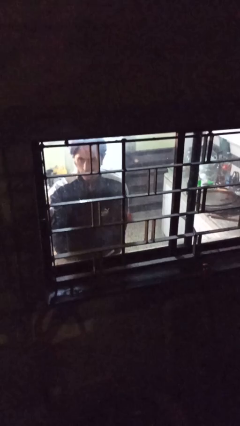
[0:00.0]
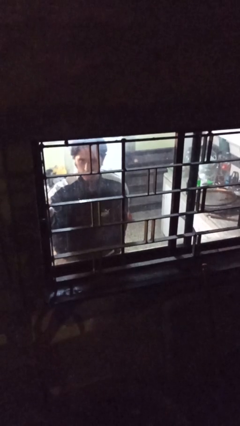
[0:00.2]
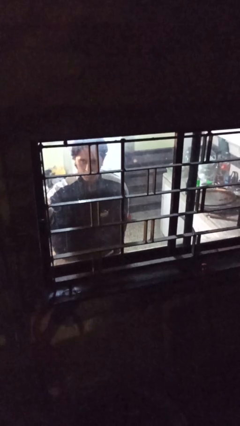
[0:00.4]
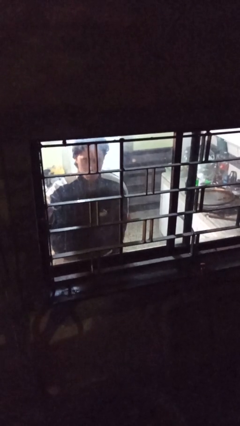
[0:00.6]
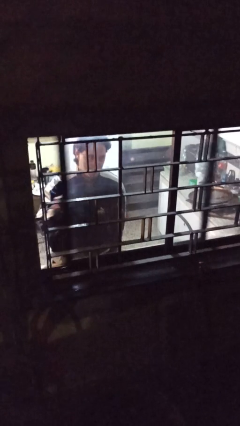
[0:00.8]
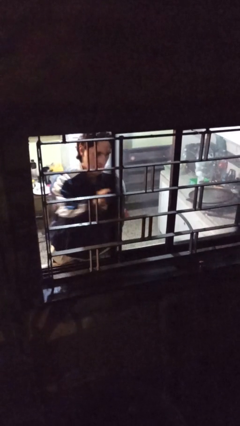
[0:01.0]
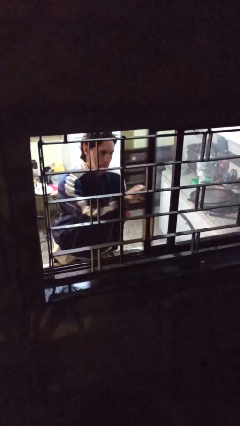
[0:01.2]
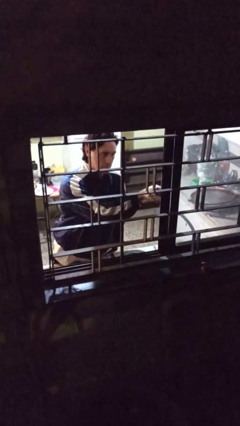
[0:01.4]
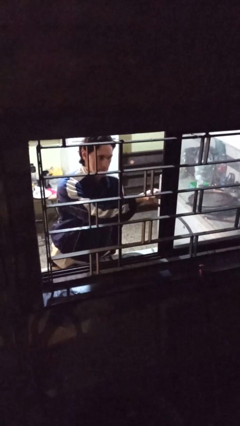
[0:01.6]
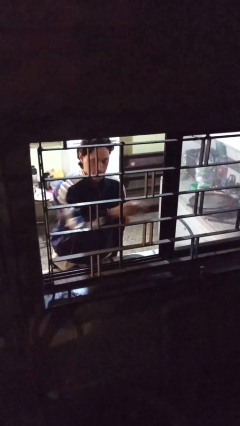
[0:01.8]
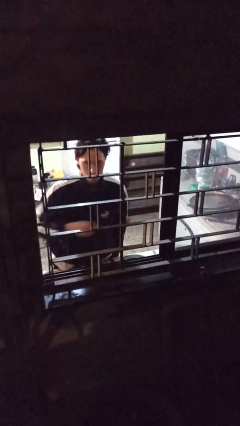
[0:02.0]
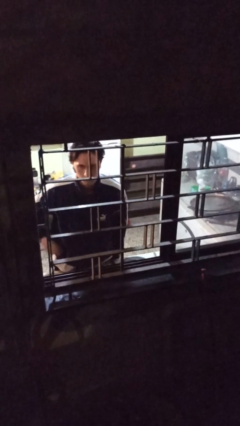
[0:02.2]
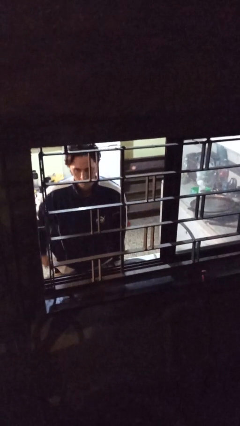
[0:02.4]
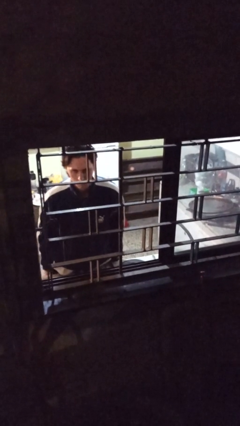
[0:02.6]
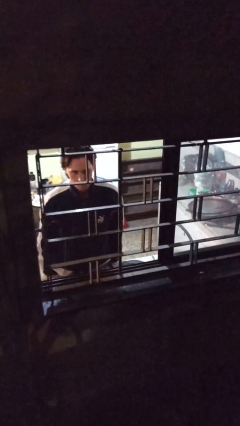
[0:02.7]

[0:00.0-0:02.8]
person opens home window

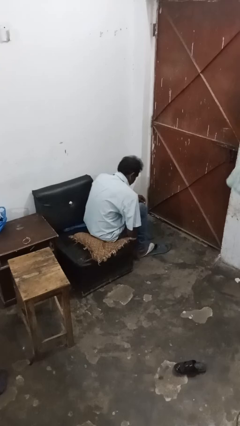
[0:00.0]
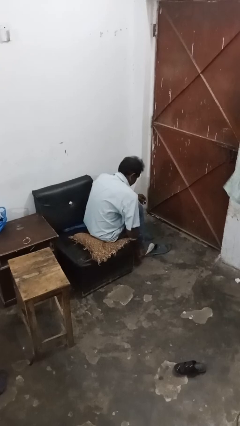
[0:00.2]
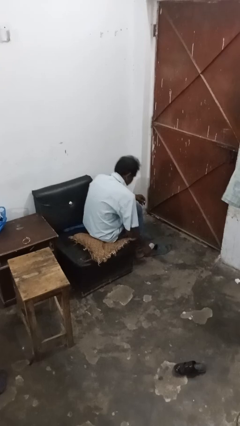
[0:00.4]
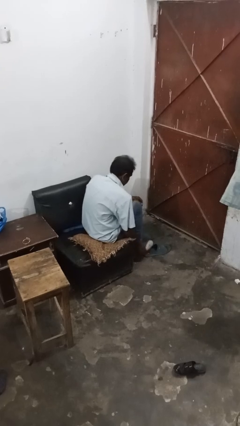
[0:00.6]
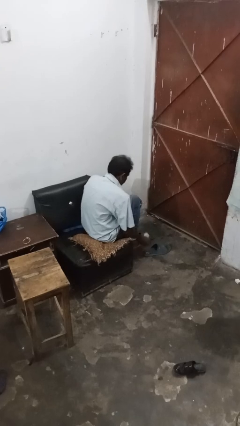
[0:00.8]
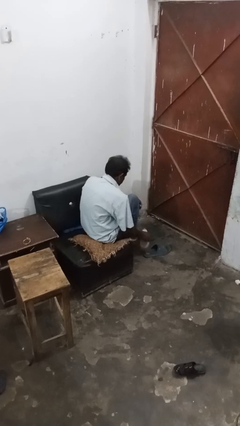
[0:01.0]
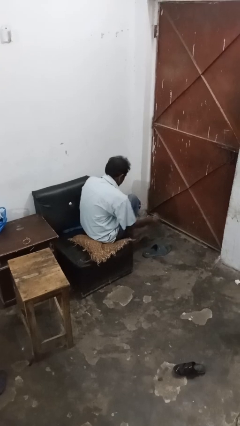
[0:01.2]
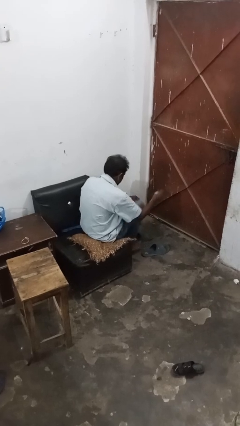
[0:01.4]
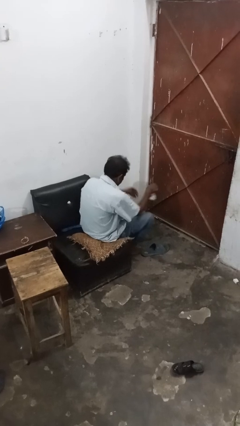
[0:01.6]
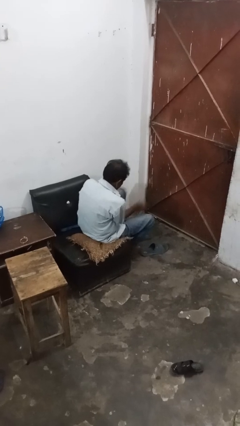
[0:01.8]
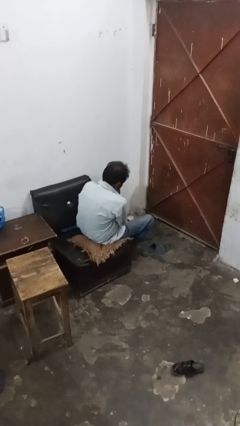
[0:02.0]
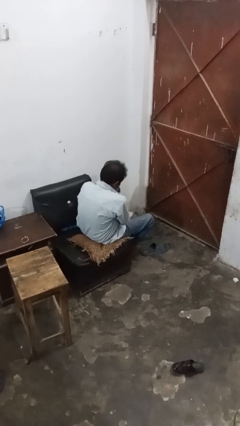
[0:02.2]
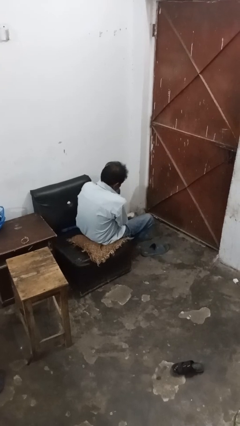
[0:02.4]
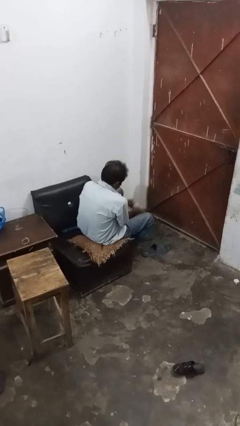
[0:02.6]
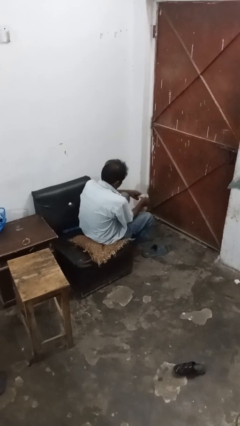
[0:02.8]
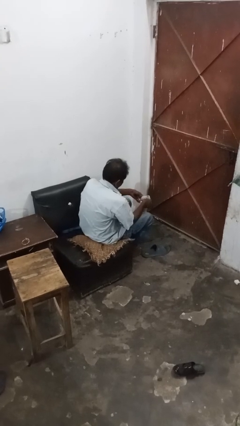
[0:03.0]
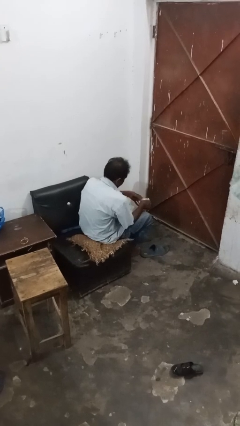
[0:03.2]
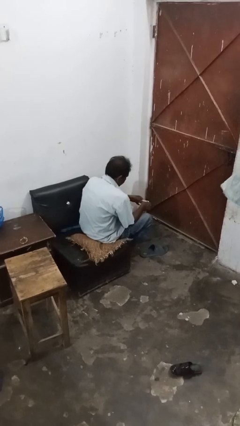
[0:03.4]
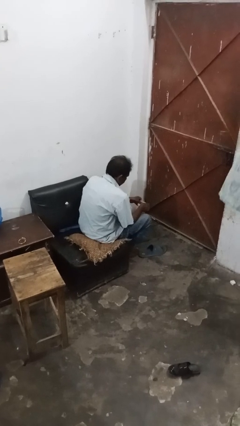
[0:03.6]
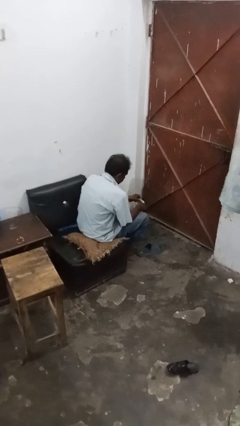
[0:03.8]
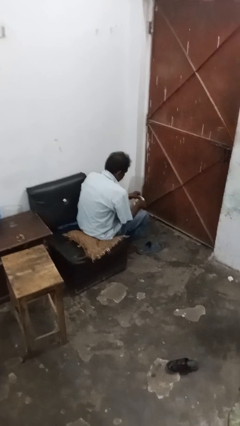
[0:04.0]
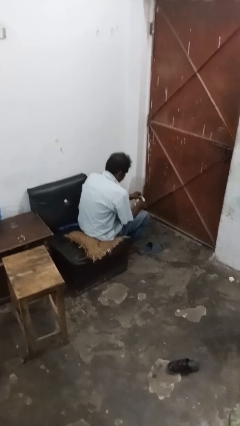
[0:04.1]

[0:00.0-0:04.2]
person takes off socks

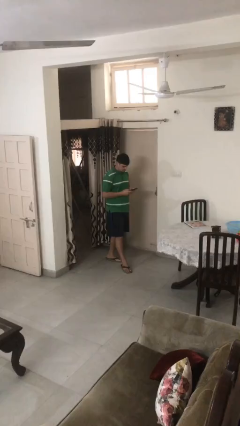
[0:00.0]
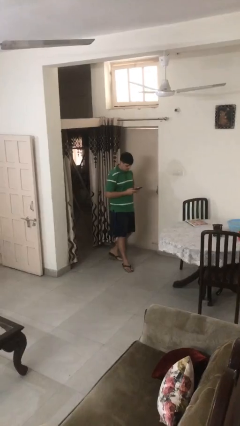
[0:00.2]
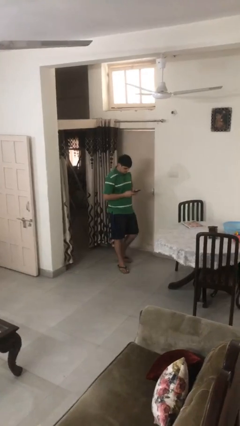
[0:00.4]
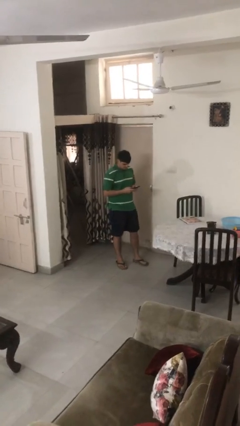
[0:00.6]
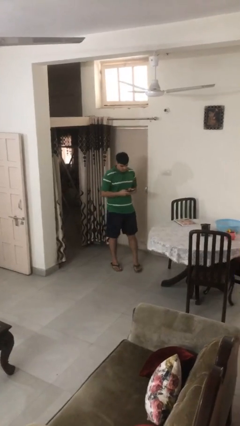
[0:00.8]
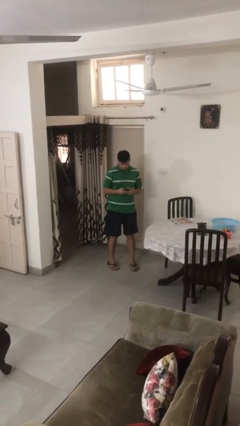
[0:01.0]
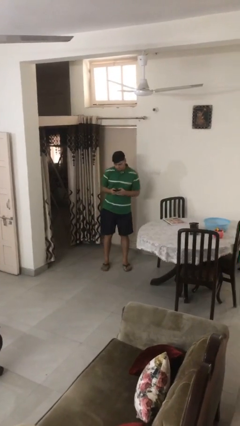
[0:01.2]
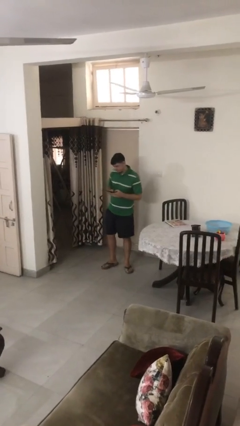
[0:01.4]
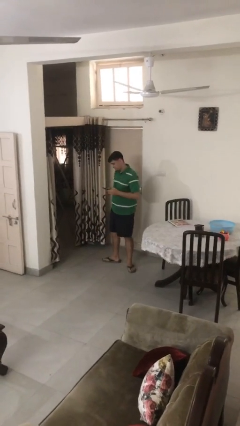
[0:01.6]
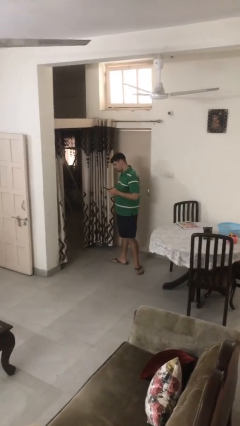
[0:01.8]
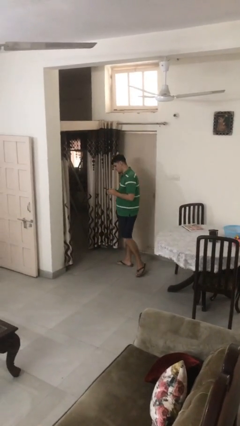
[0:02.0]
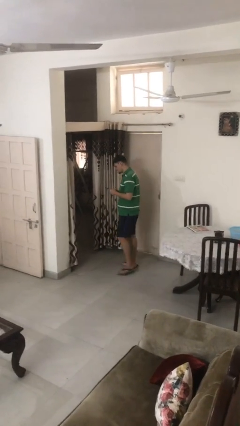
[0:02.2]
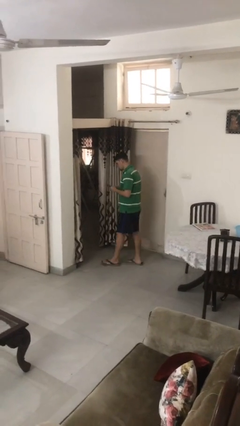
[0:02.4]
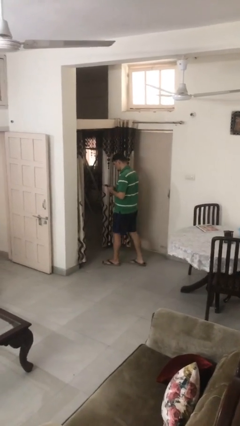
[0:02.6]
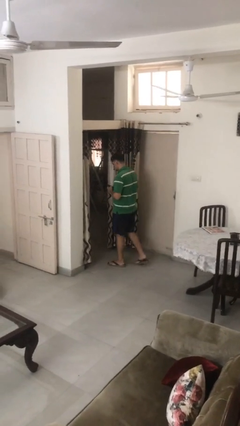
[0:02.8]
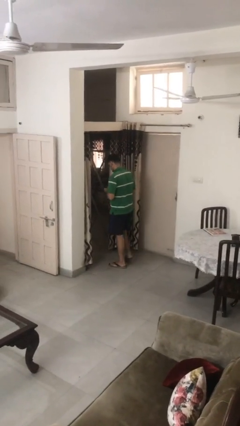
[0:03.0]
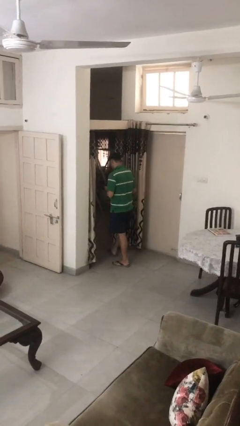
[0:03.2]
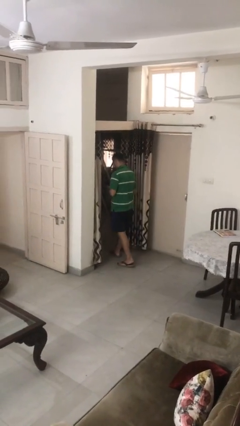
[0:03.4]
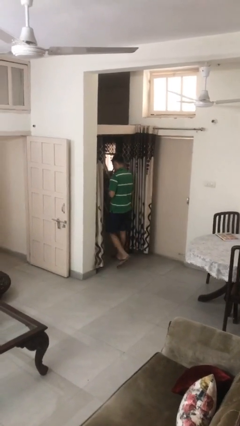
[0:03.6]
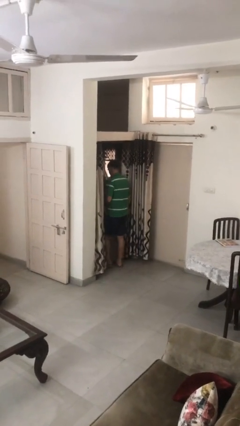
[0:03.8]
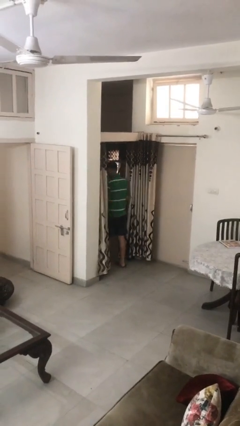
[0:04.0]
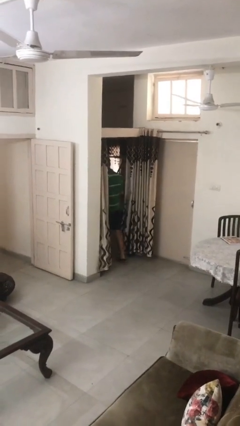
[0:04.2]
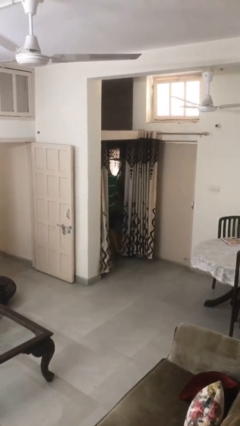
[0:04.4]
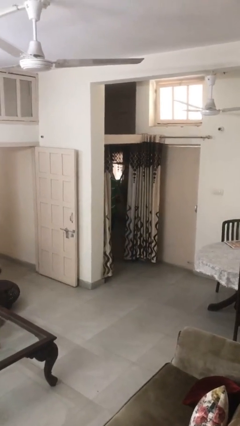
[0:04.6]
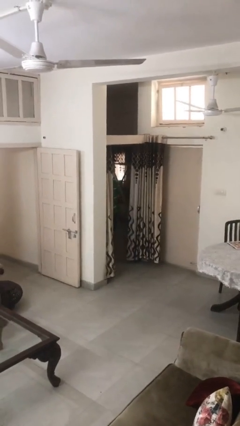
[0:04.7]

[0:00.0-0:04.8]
person exits scene through structure

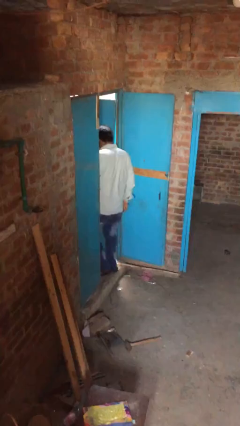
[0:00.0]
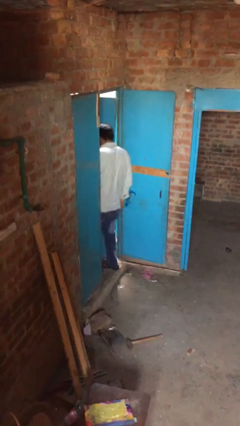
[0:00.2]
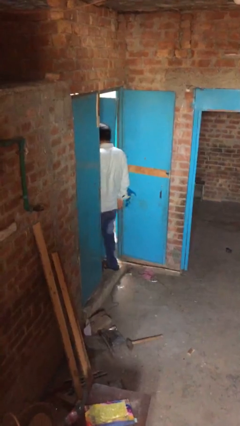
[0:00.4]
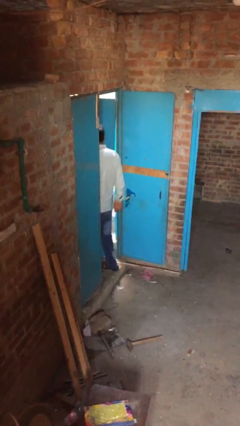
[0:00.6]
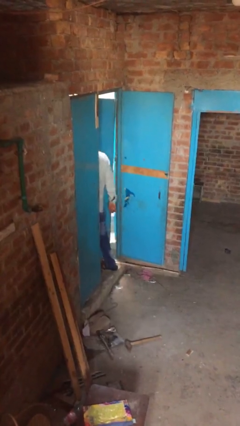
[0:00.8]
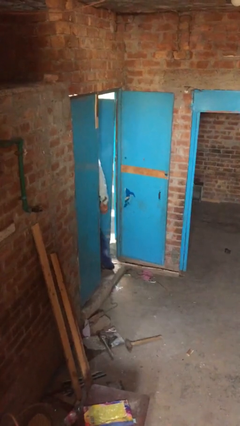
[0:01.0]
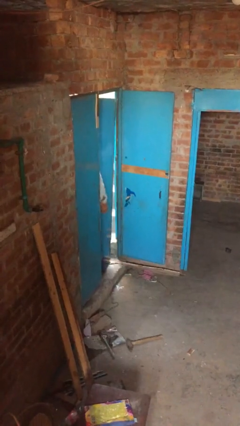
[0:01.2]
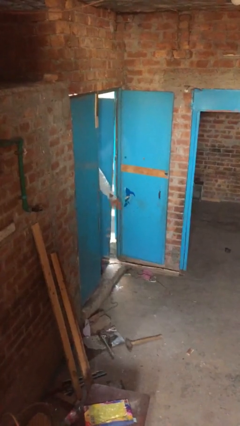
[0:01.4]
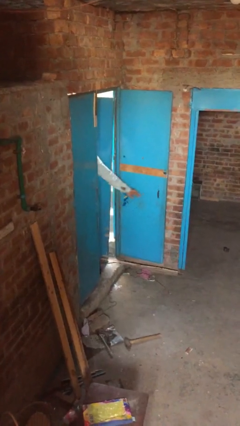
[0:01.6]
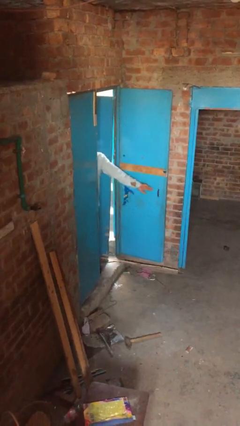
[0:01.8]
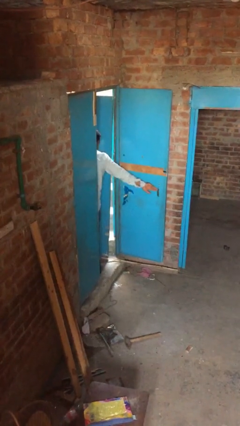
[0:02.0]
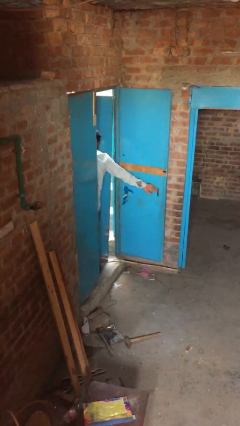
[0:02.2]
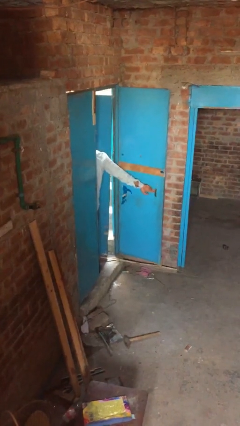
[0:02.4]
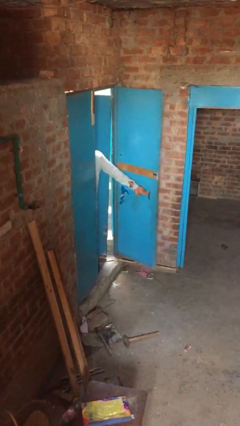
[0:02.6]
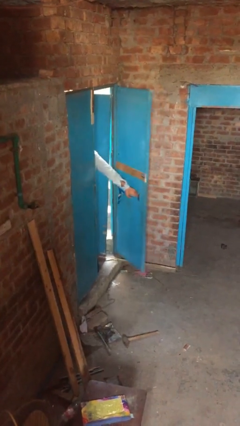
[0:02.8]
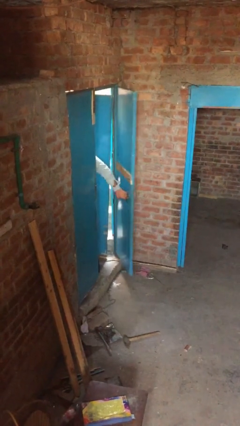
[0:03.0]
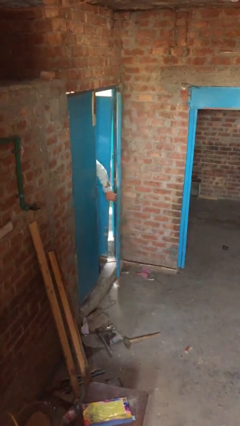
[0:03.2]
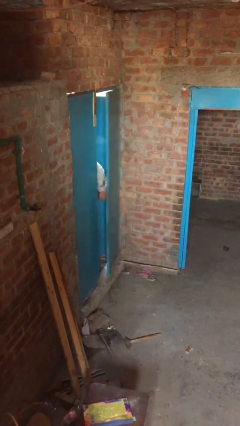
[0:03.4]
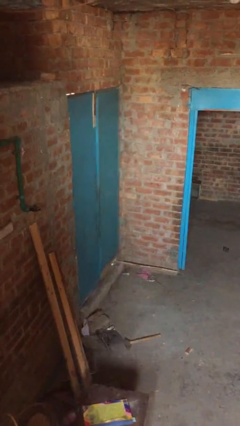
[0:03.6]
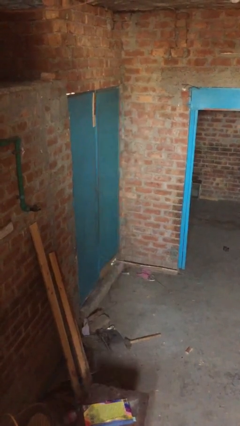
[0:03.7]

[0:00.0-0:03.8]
person closes facility door

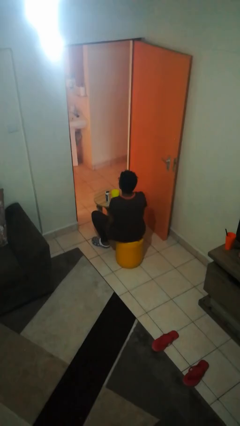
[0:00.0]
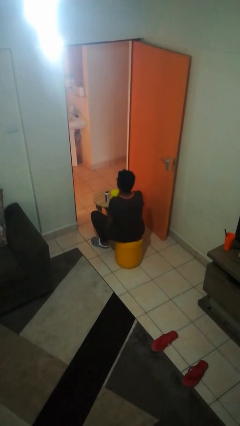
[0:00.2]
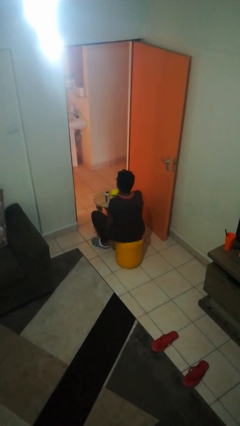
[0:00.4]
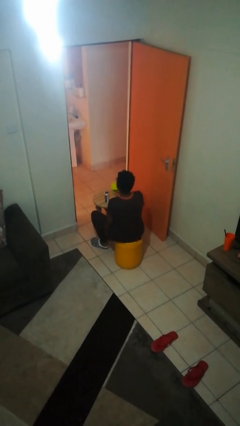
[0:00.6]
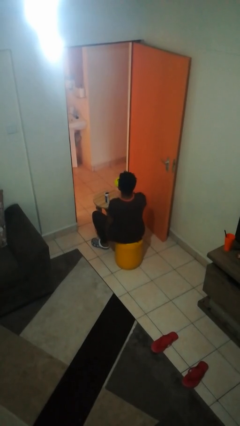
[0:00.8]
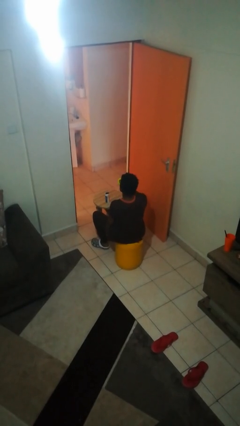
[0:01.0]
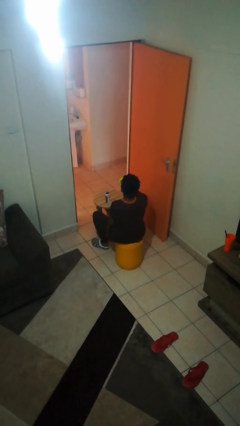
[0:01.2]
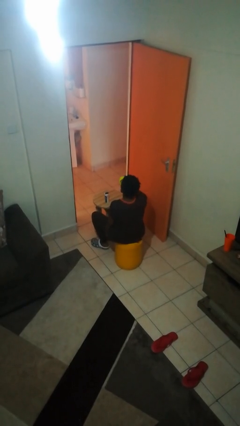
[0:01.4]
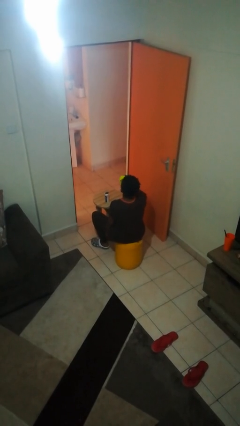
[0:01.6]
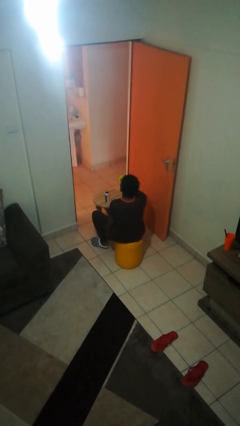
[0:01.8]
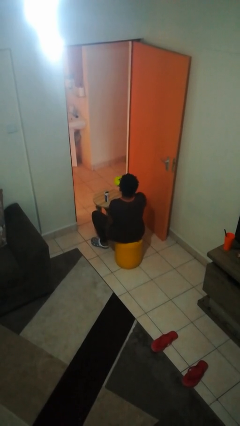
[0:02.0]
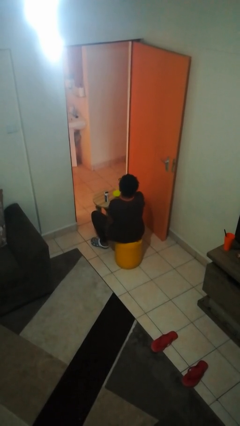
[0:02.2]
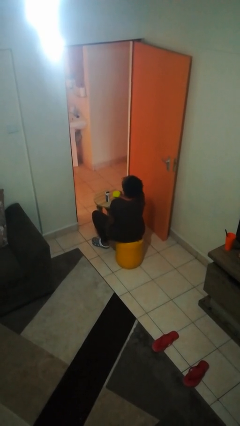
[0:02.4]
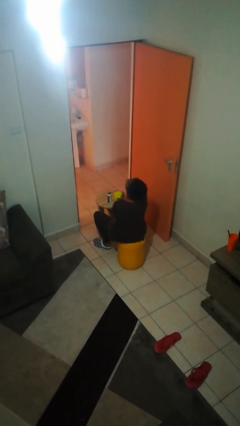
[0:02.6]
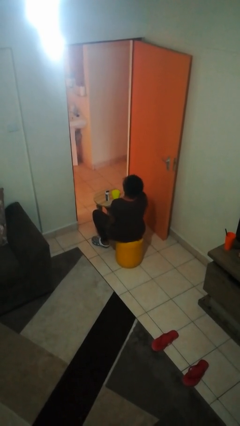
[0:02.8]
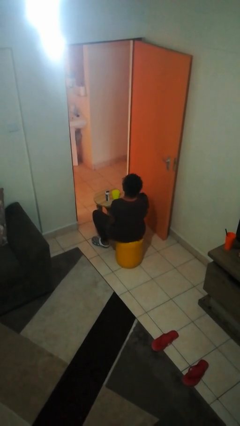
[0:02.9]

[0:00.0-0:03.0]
person drinks from cup
